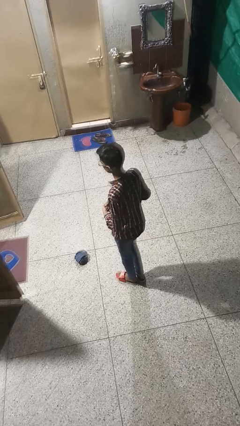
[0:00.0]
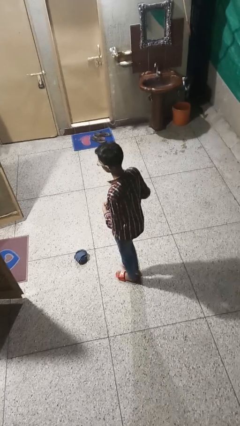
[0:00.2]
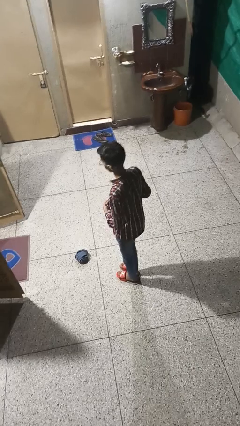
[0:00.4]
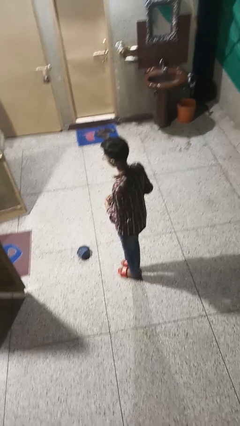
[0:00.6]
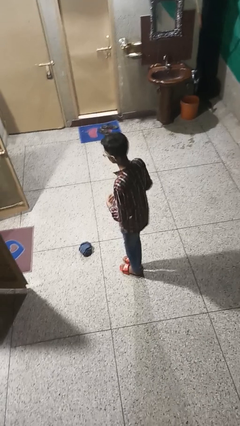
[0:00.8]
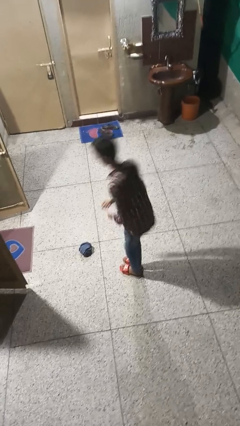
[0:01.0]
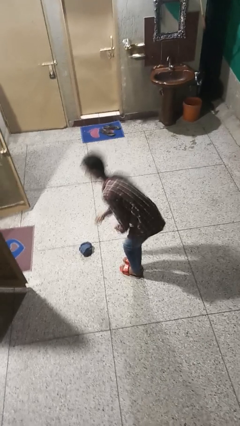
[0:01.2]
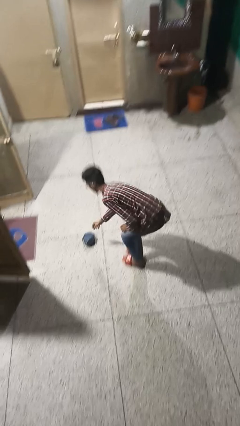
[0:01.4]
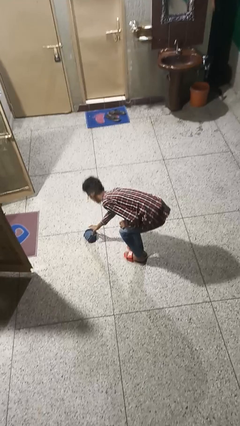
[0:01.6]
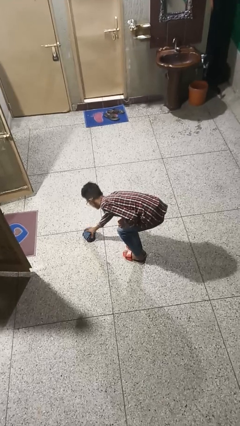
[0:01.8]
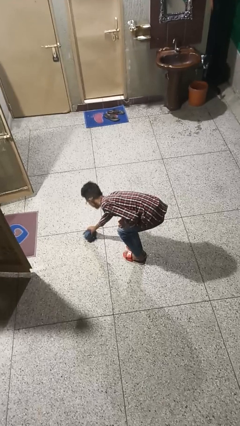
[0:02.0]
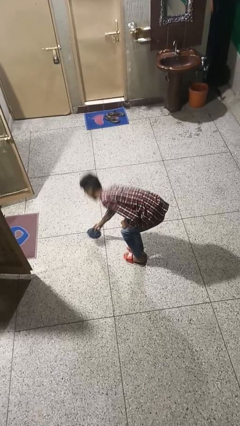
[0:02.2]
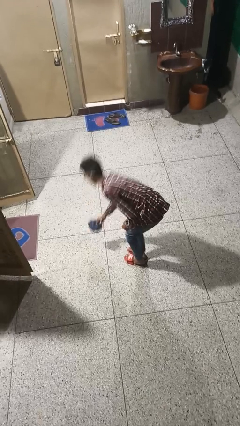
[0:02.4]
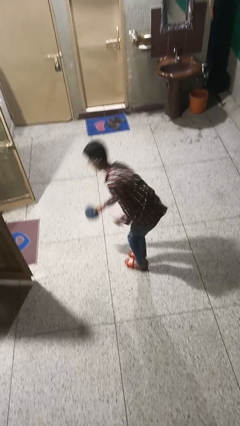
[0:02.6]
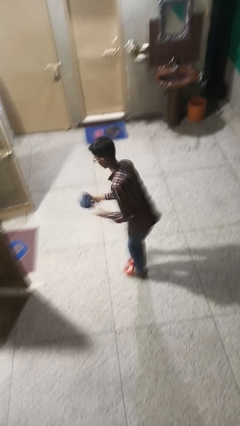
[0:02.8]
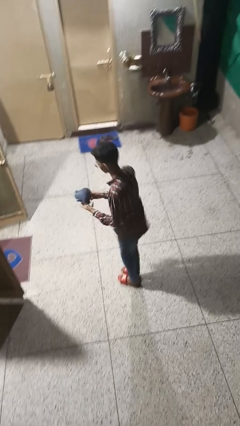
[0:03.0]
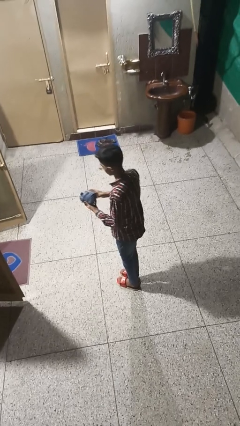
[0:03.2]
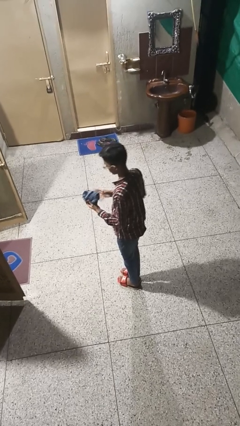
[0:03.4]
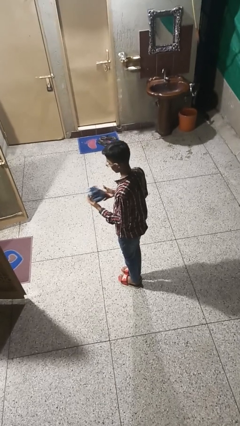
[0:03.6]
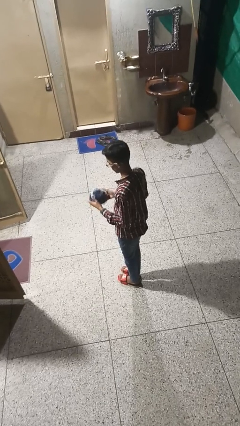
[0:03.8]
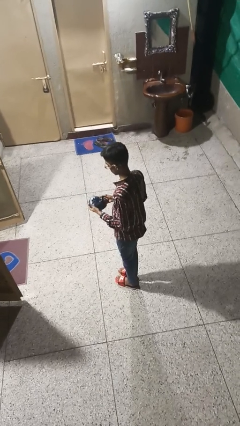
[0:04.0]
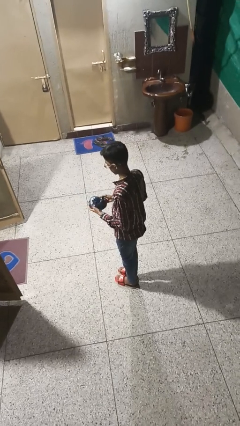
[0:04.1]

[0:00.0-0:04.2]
person picks up object from floor

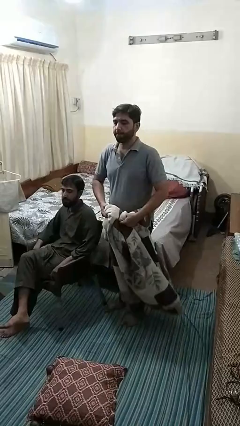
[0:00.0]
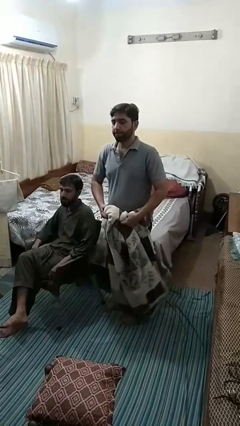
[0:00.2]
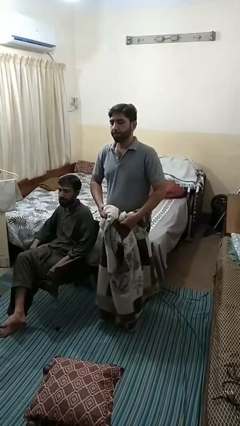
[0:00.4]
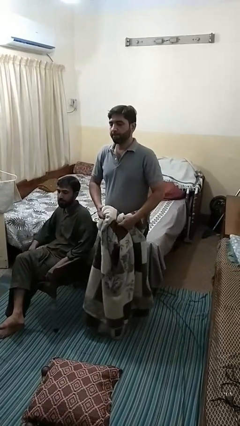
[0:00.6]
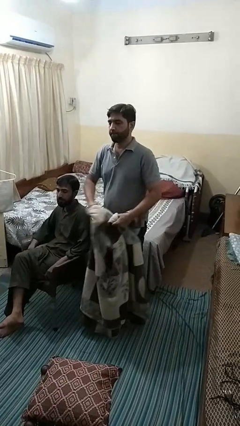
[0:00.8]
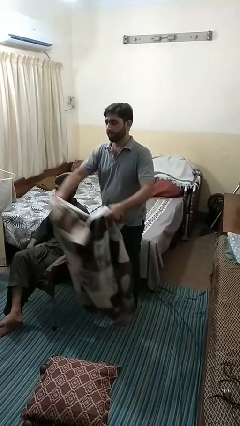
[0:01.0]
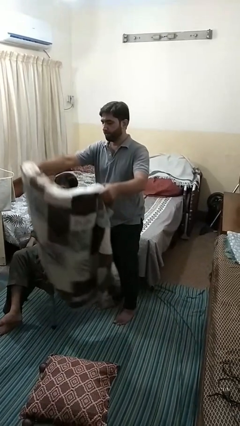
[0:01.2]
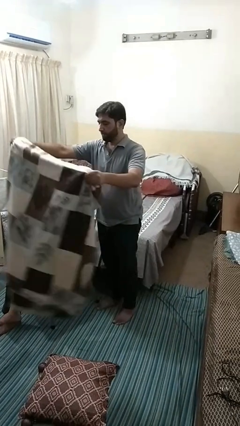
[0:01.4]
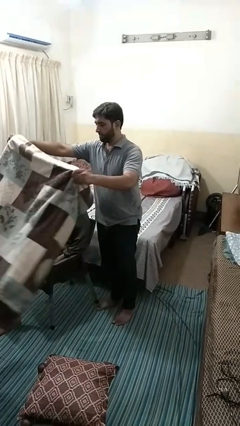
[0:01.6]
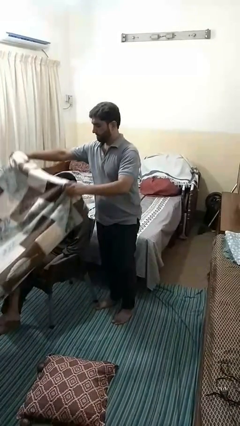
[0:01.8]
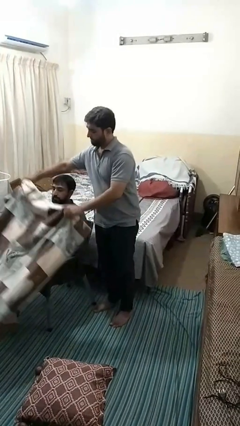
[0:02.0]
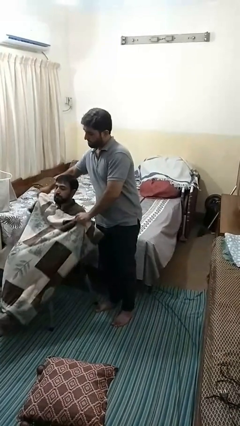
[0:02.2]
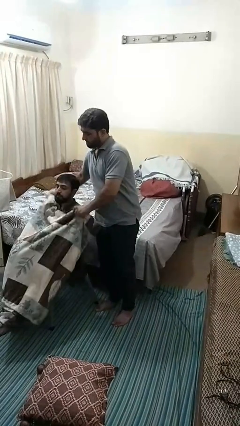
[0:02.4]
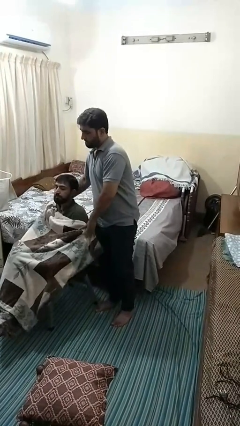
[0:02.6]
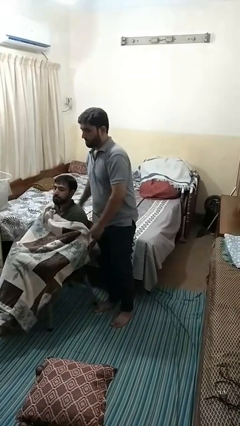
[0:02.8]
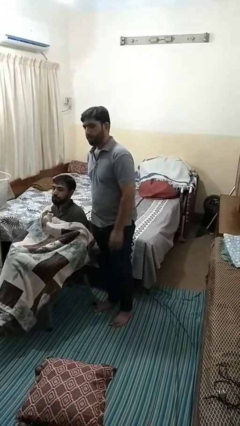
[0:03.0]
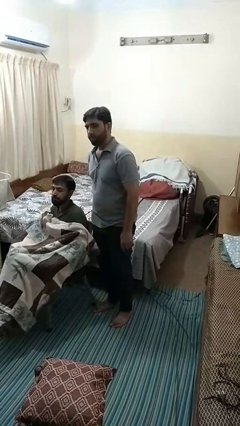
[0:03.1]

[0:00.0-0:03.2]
person covers friend with blanket

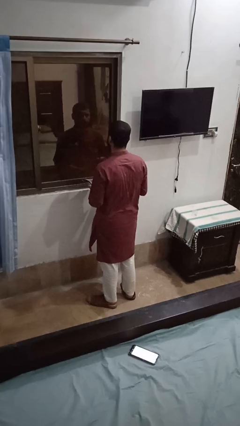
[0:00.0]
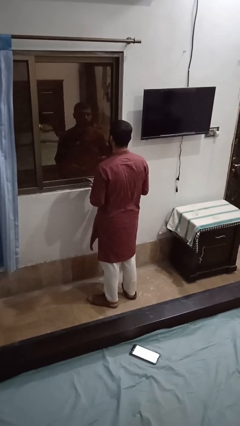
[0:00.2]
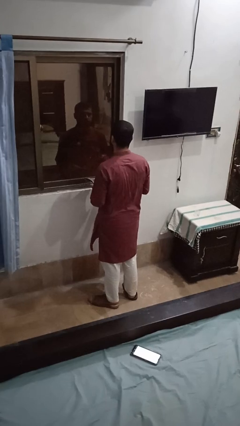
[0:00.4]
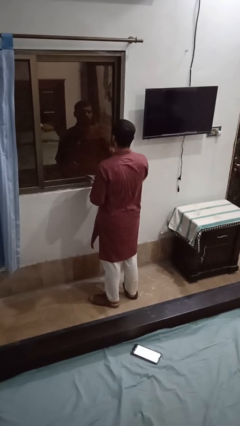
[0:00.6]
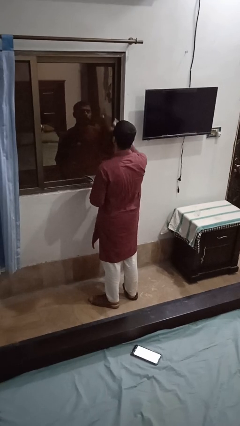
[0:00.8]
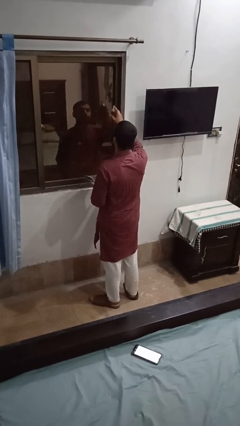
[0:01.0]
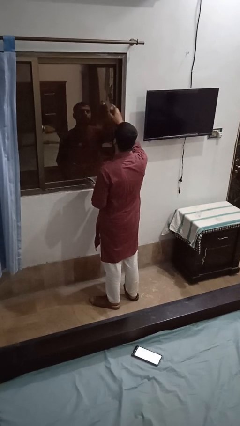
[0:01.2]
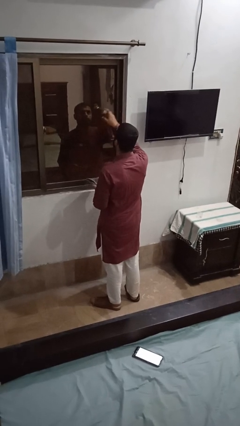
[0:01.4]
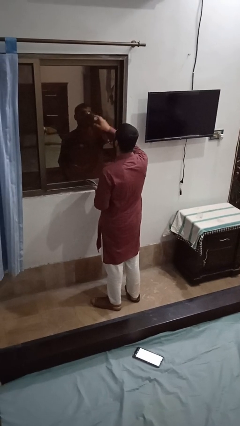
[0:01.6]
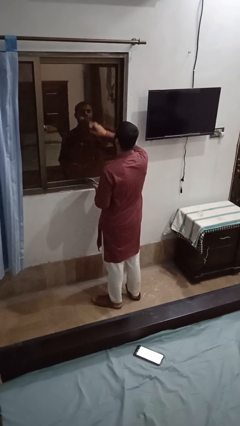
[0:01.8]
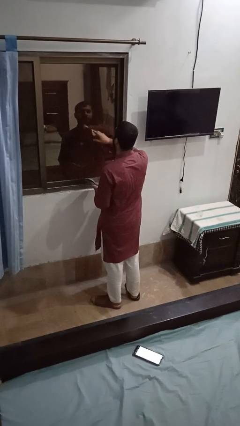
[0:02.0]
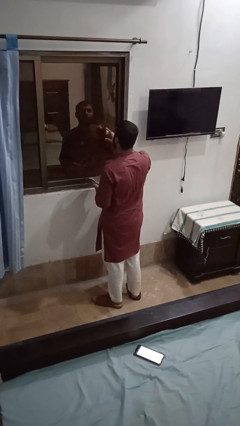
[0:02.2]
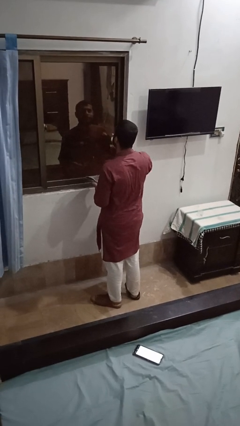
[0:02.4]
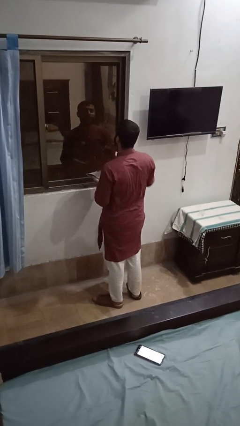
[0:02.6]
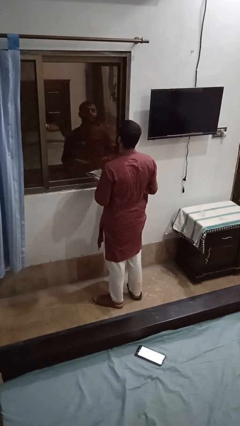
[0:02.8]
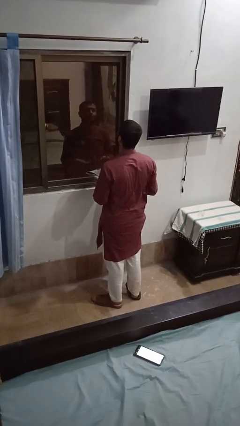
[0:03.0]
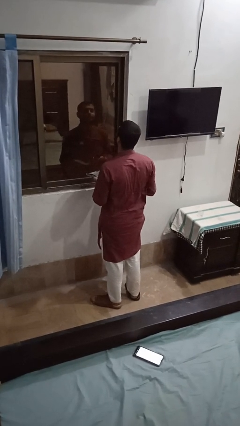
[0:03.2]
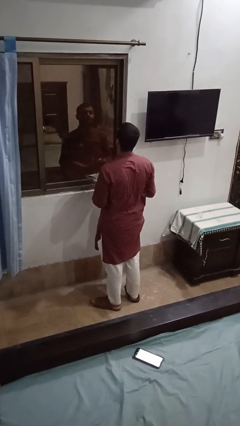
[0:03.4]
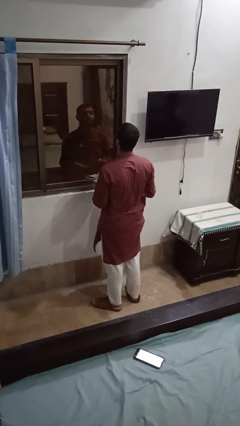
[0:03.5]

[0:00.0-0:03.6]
person sprays from bottle

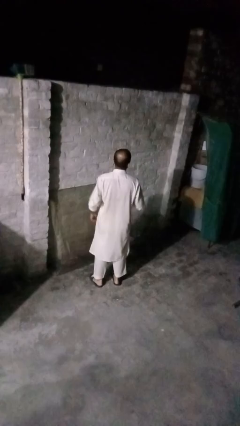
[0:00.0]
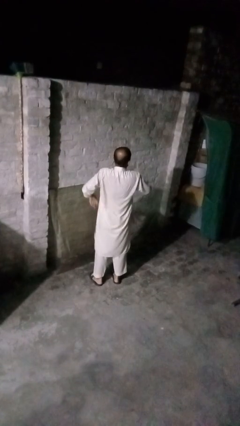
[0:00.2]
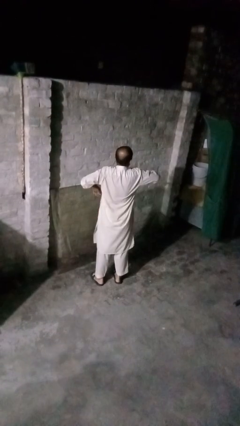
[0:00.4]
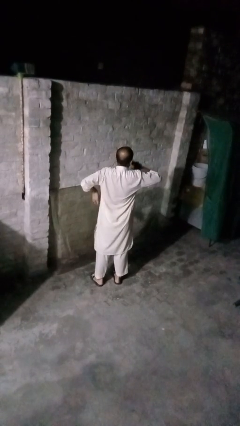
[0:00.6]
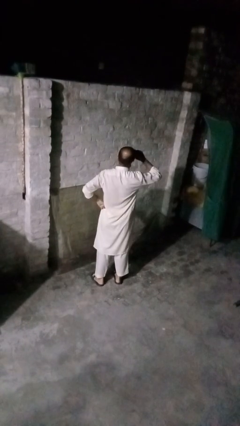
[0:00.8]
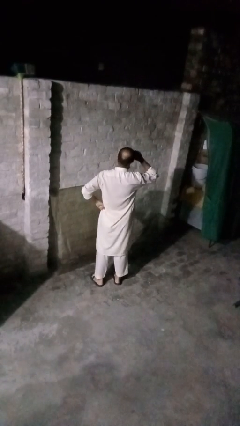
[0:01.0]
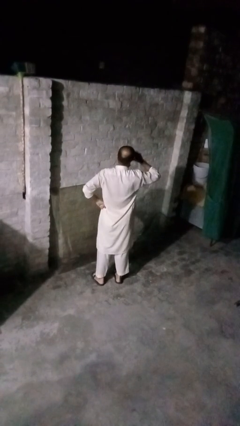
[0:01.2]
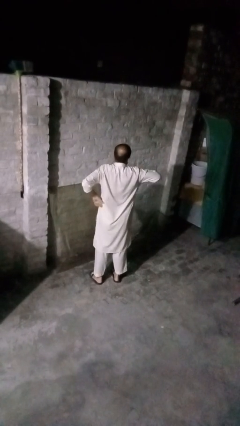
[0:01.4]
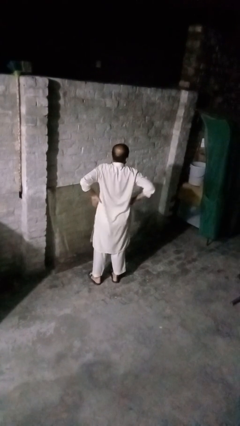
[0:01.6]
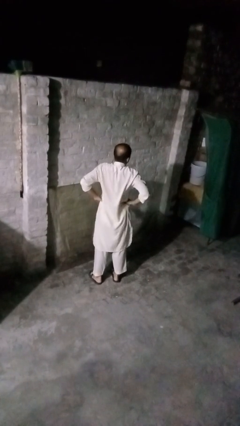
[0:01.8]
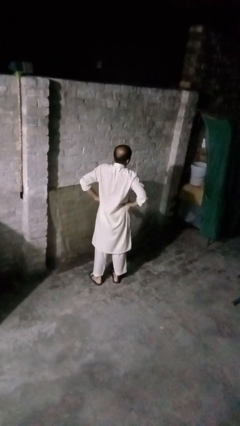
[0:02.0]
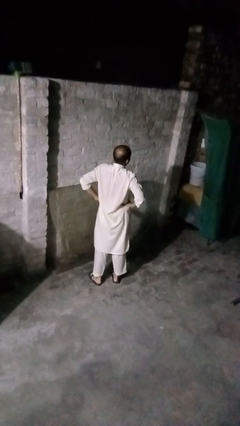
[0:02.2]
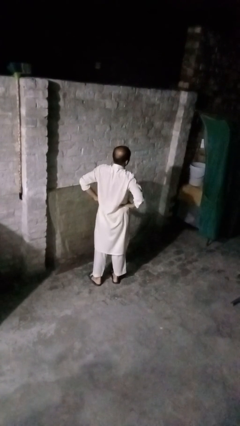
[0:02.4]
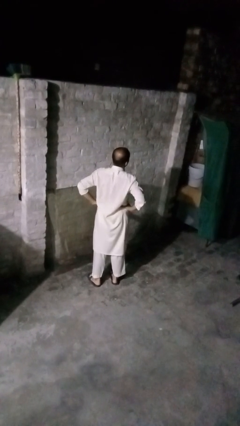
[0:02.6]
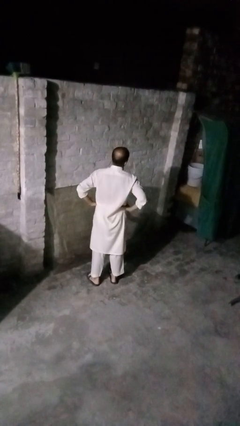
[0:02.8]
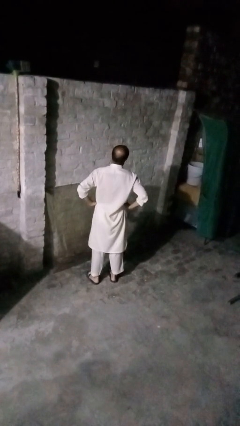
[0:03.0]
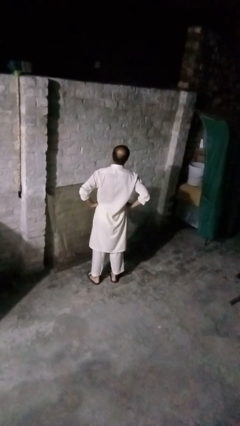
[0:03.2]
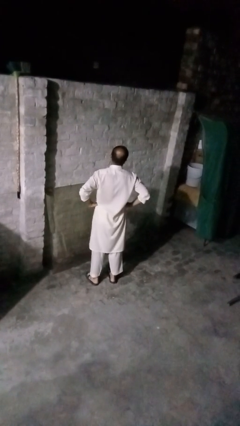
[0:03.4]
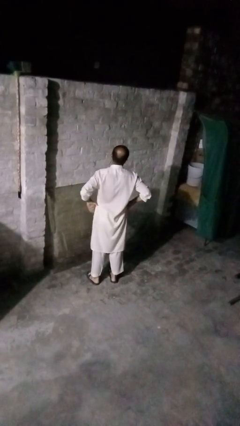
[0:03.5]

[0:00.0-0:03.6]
person shrugs

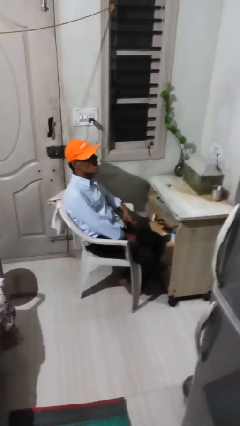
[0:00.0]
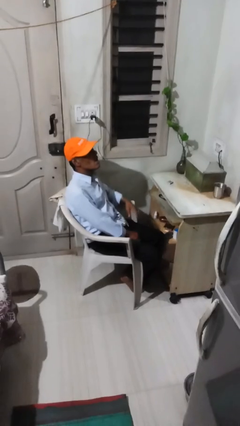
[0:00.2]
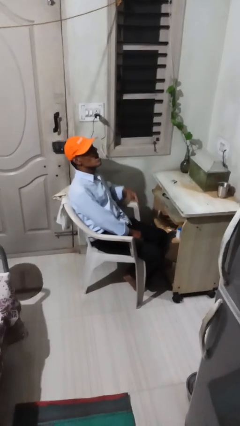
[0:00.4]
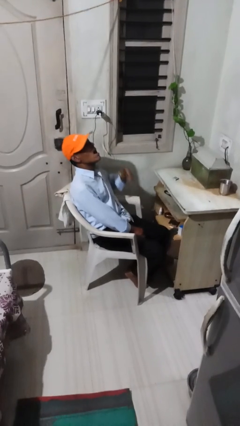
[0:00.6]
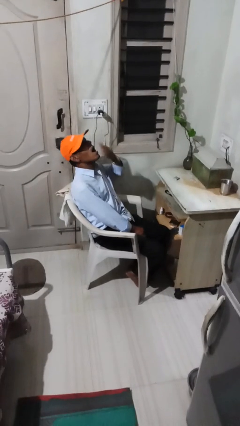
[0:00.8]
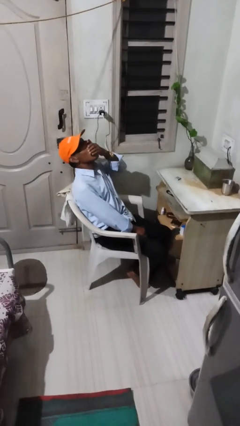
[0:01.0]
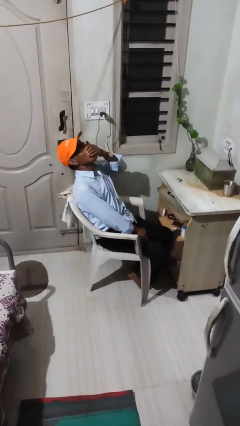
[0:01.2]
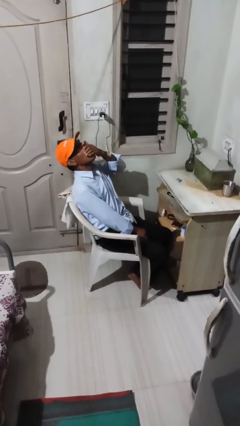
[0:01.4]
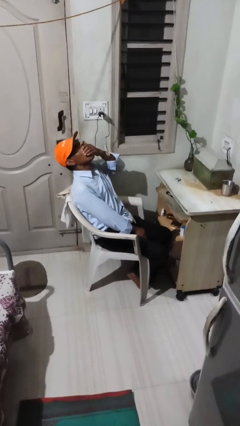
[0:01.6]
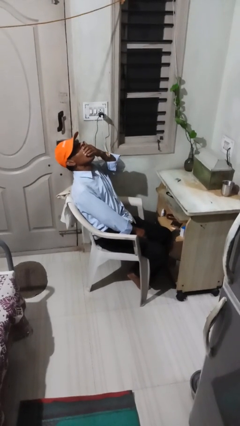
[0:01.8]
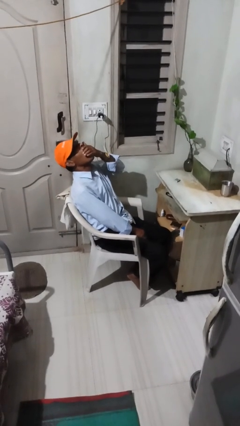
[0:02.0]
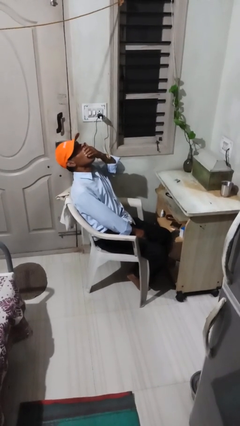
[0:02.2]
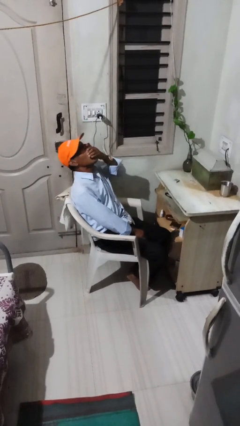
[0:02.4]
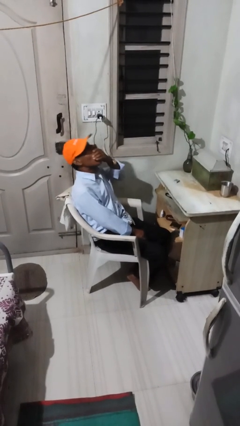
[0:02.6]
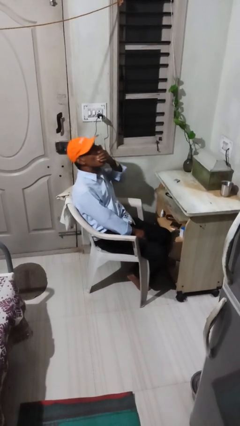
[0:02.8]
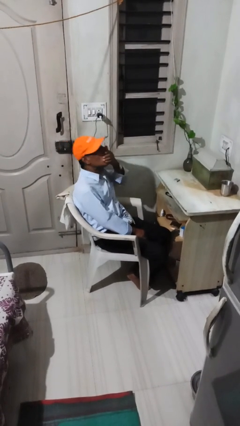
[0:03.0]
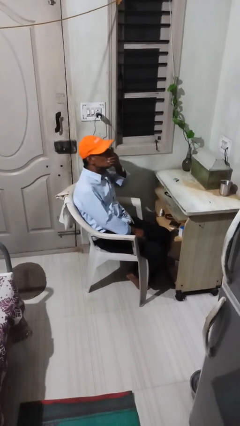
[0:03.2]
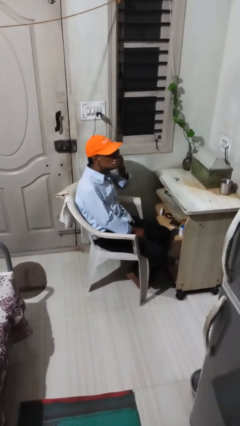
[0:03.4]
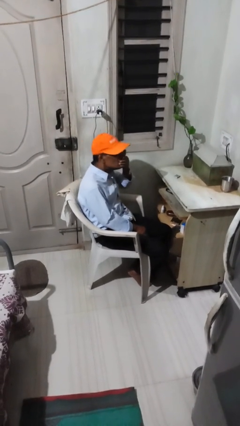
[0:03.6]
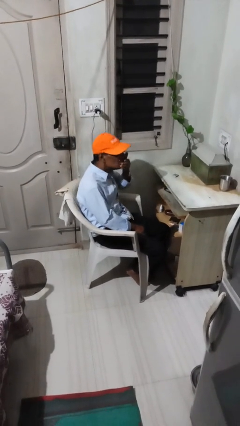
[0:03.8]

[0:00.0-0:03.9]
person yawns
